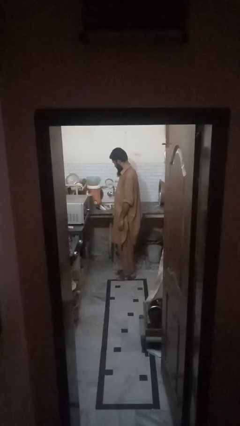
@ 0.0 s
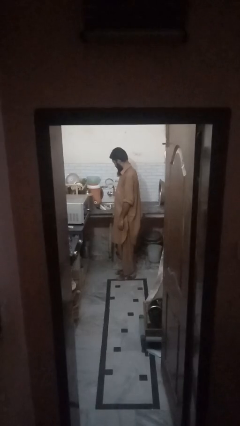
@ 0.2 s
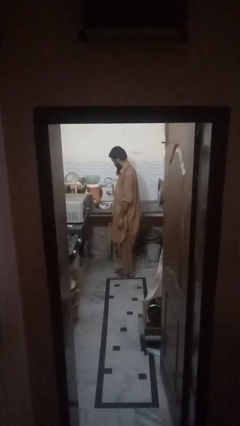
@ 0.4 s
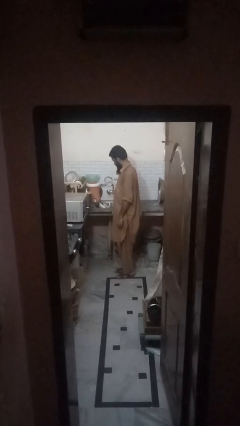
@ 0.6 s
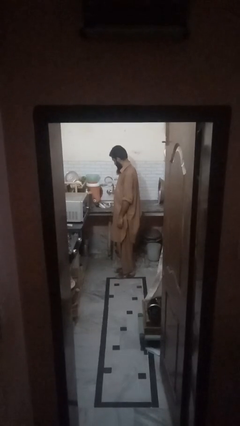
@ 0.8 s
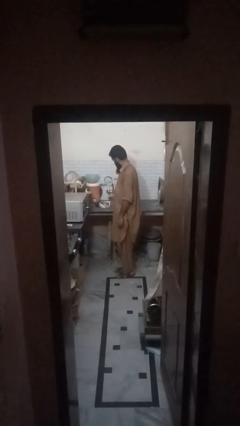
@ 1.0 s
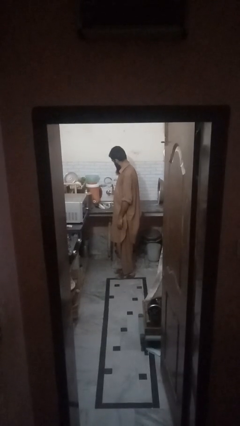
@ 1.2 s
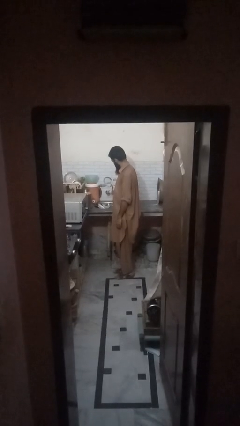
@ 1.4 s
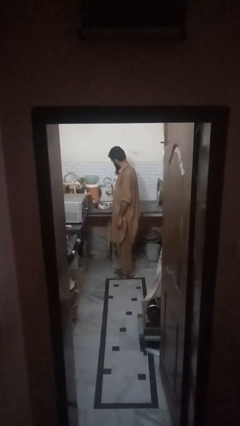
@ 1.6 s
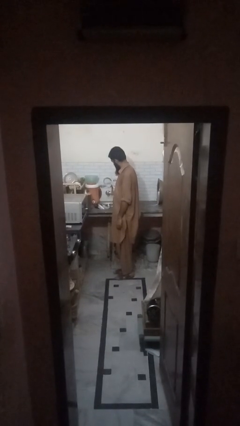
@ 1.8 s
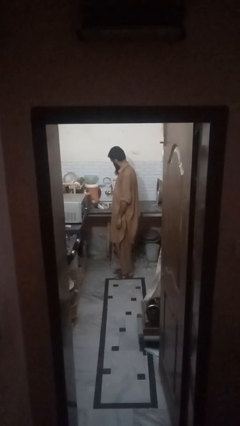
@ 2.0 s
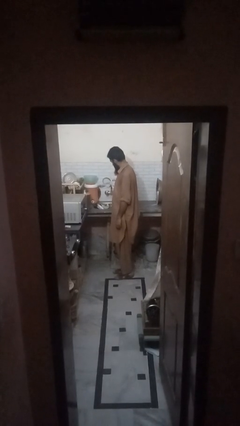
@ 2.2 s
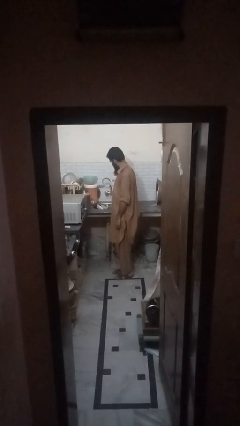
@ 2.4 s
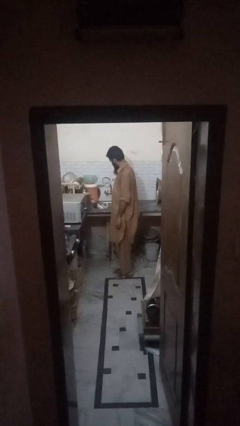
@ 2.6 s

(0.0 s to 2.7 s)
person closes dishwasher

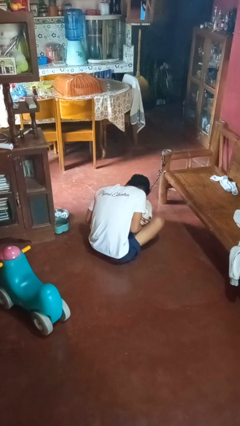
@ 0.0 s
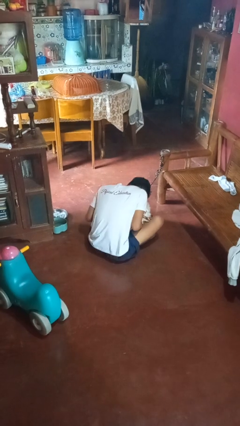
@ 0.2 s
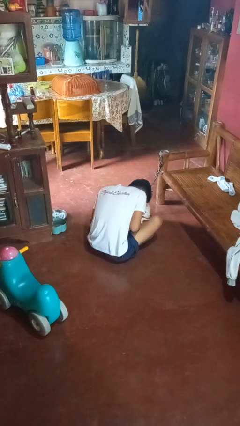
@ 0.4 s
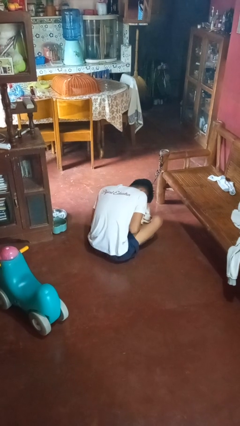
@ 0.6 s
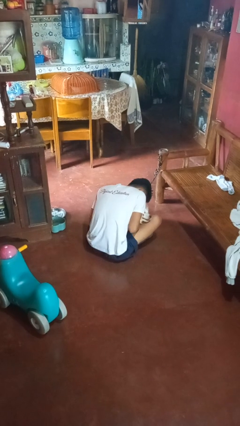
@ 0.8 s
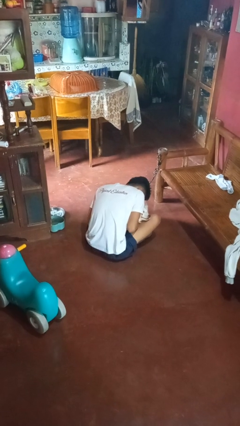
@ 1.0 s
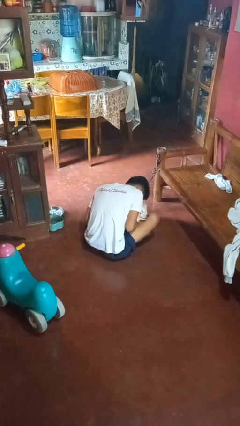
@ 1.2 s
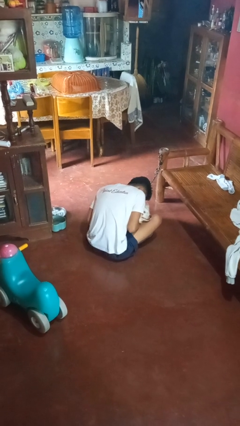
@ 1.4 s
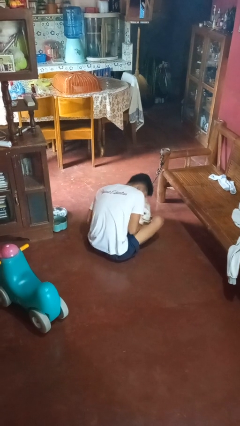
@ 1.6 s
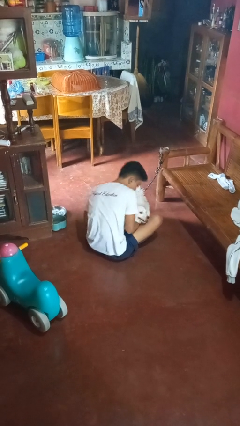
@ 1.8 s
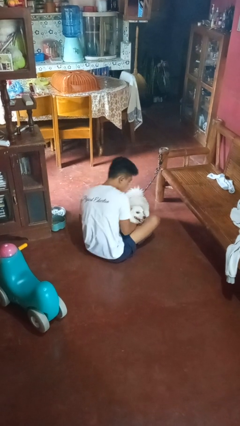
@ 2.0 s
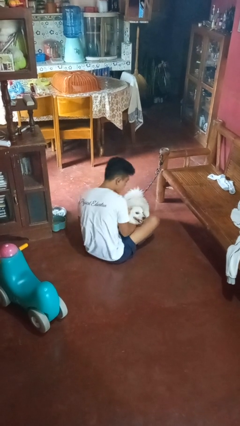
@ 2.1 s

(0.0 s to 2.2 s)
person hugs dog

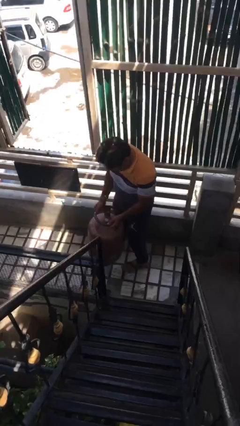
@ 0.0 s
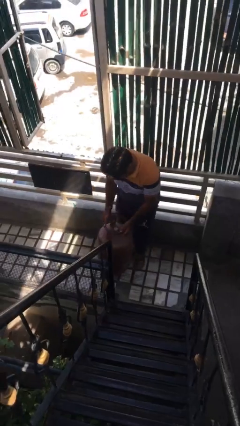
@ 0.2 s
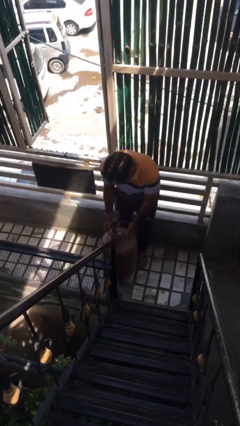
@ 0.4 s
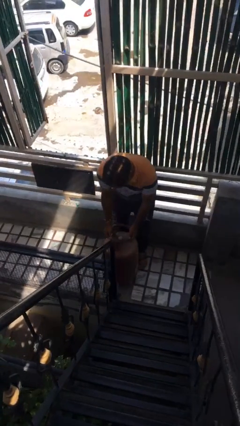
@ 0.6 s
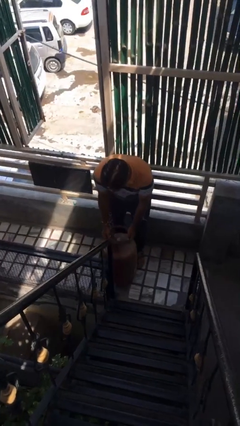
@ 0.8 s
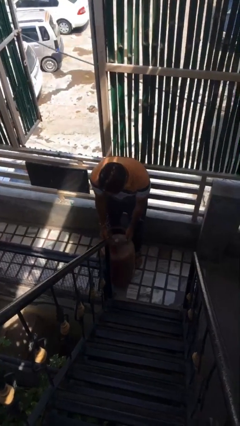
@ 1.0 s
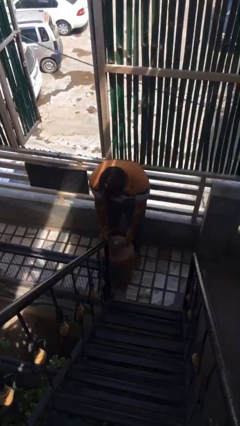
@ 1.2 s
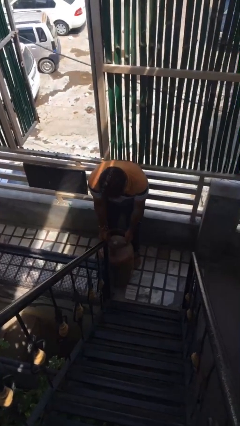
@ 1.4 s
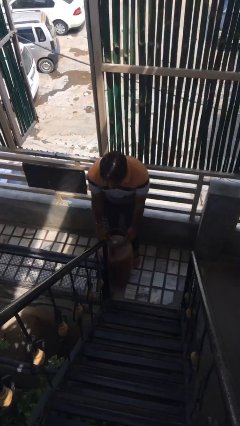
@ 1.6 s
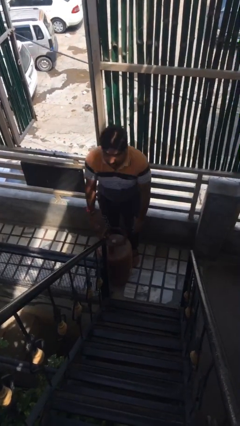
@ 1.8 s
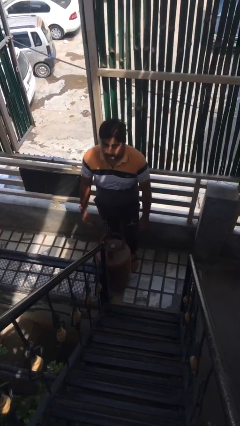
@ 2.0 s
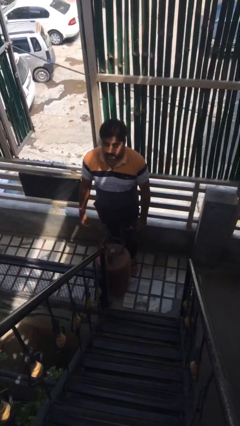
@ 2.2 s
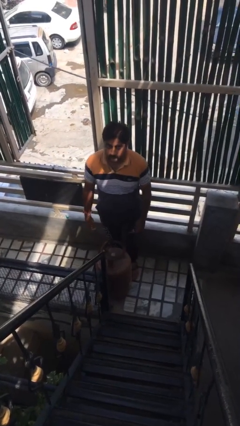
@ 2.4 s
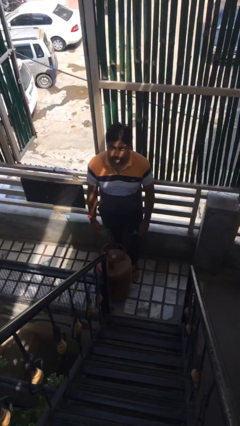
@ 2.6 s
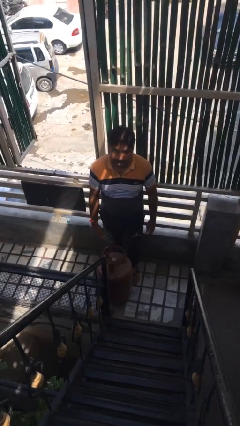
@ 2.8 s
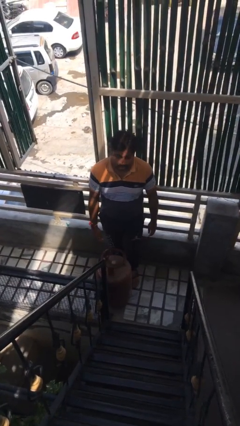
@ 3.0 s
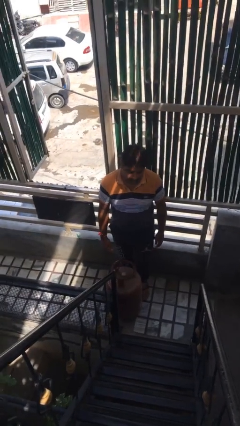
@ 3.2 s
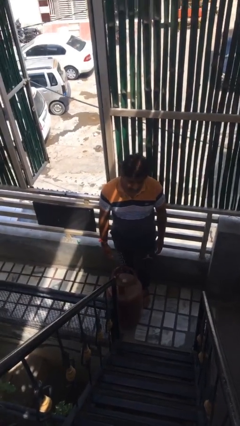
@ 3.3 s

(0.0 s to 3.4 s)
person puts down object on floor

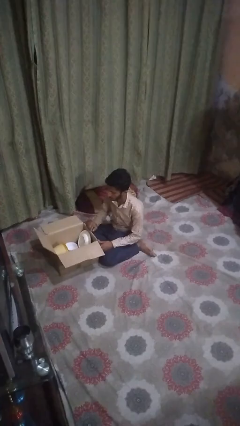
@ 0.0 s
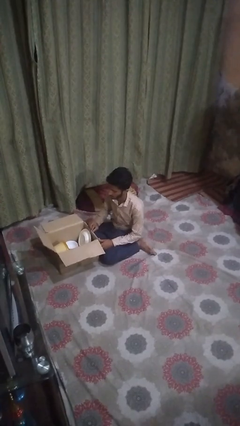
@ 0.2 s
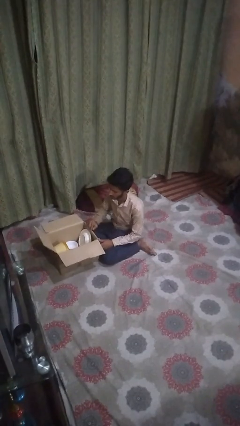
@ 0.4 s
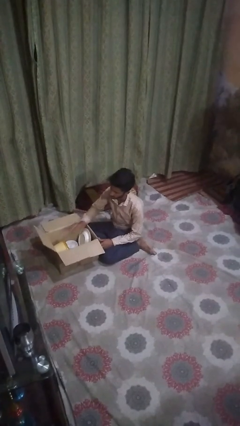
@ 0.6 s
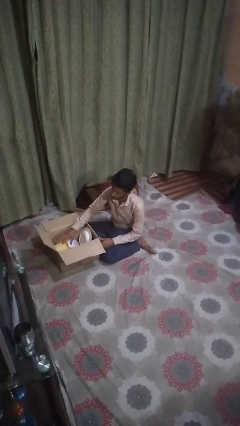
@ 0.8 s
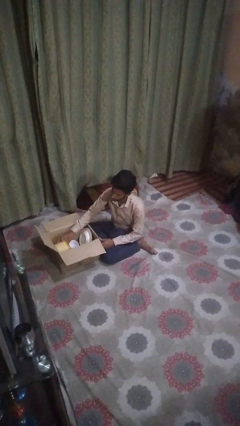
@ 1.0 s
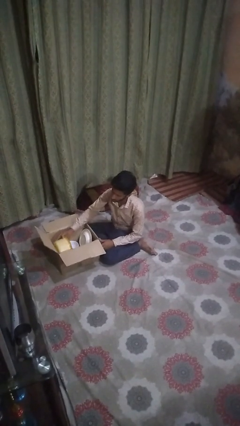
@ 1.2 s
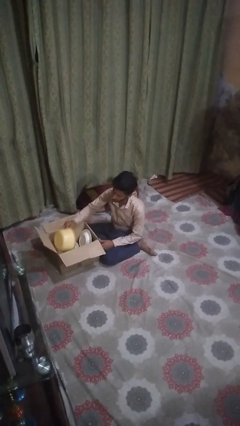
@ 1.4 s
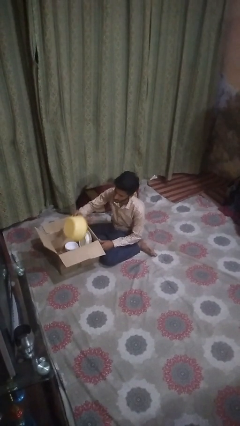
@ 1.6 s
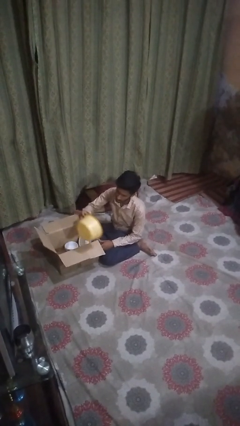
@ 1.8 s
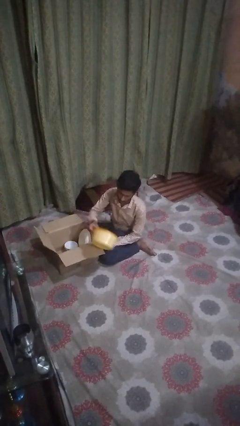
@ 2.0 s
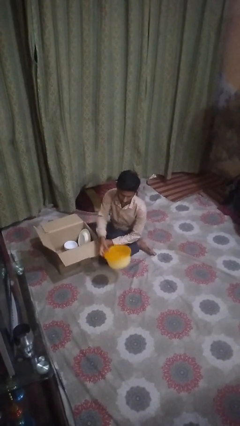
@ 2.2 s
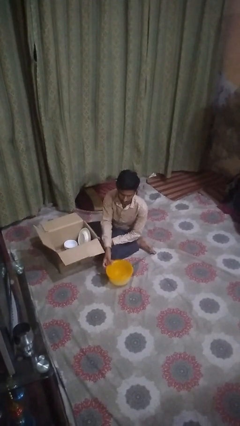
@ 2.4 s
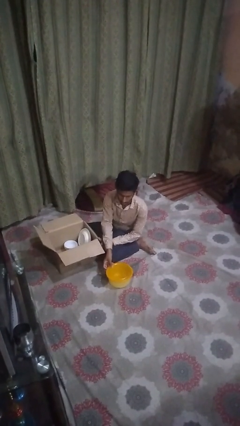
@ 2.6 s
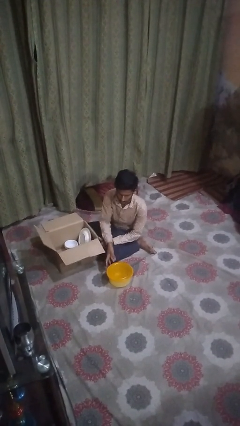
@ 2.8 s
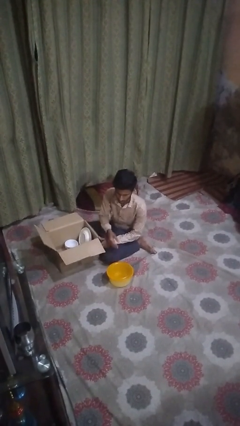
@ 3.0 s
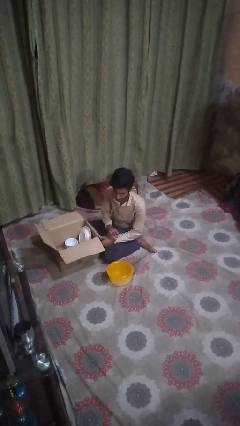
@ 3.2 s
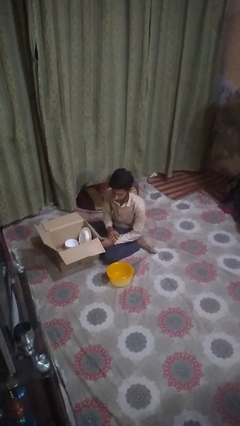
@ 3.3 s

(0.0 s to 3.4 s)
person takes object from box

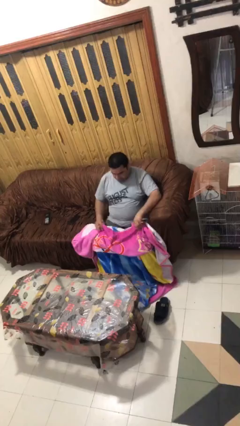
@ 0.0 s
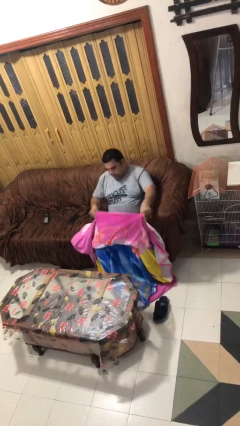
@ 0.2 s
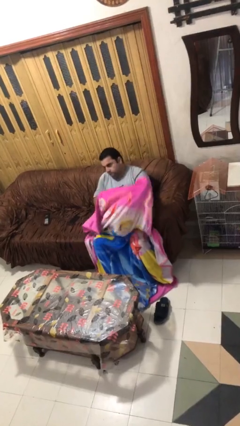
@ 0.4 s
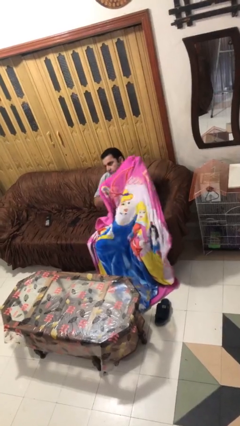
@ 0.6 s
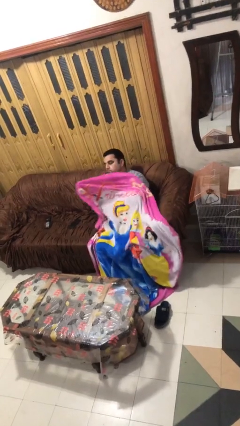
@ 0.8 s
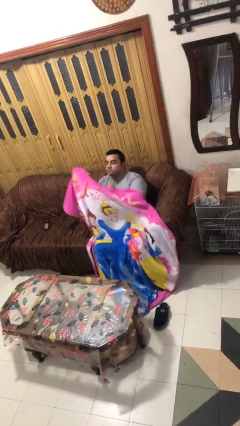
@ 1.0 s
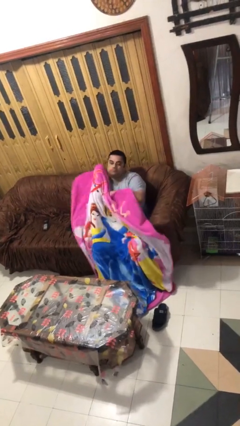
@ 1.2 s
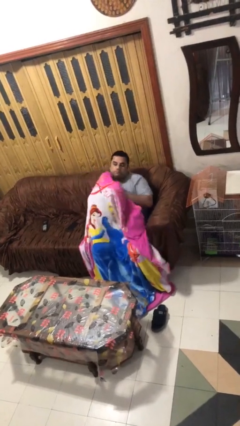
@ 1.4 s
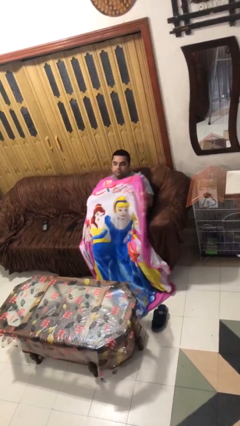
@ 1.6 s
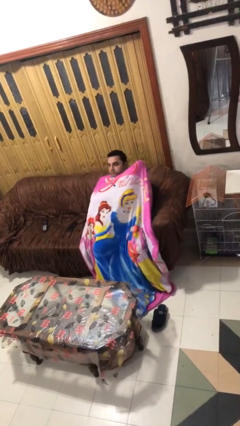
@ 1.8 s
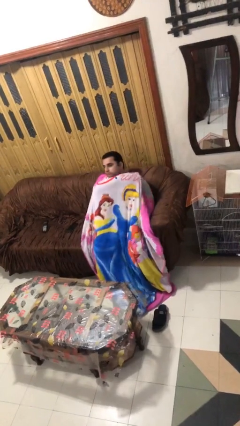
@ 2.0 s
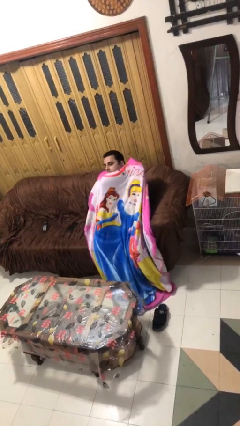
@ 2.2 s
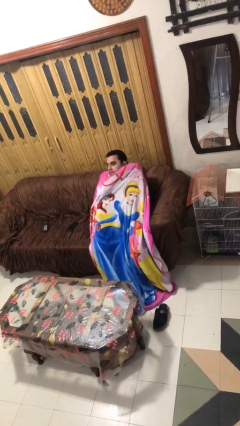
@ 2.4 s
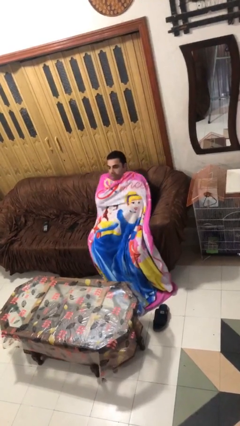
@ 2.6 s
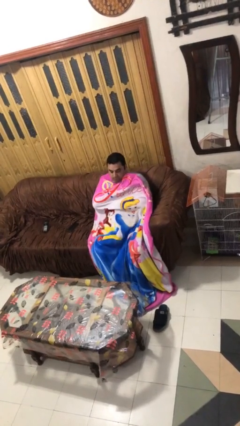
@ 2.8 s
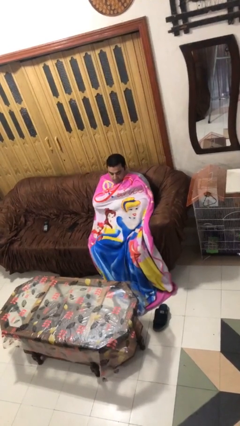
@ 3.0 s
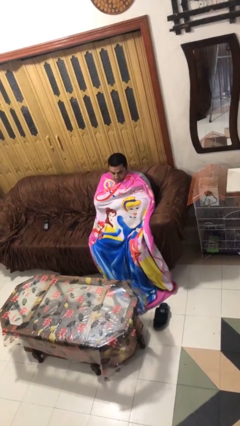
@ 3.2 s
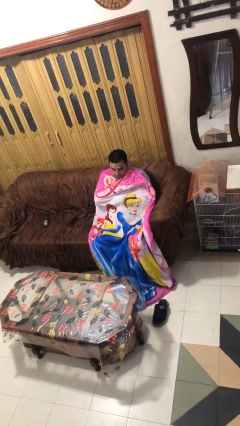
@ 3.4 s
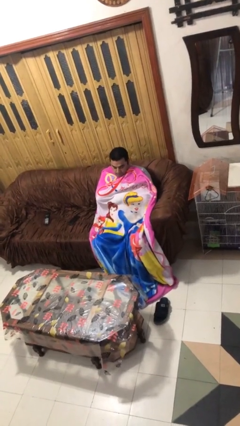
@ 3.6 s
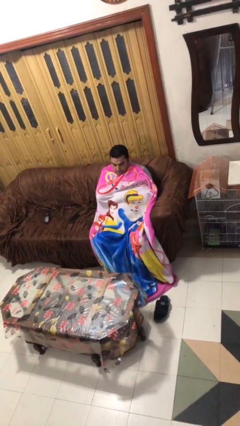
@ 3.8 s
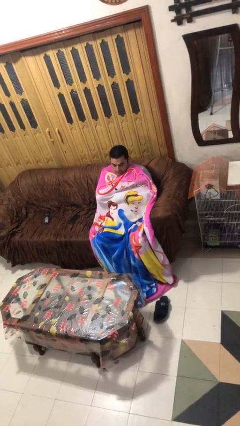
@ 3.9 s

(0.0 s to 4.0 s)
person covers with blanket

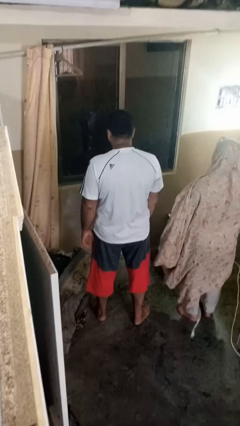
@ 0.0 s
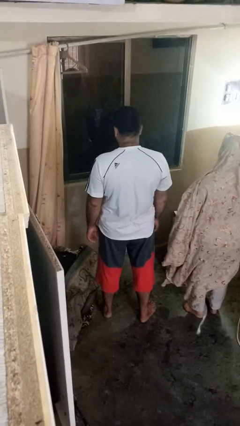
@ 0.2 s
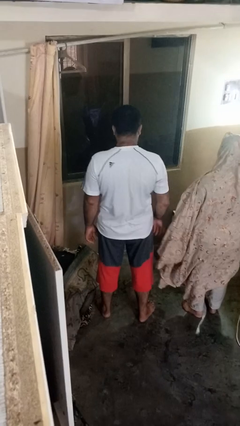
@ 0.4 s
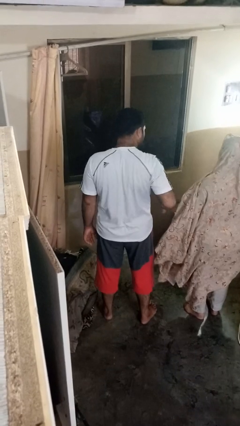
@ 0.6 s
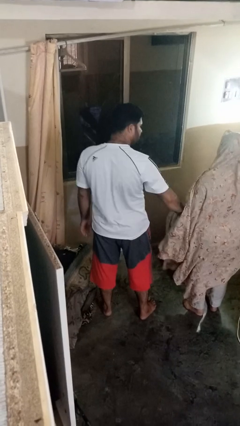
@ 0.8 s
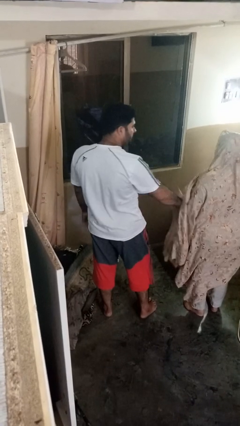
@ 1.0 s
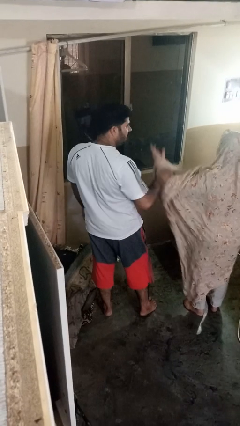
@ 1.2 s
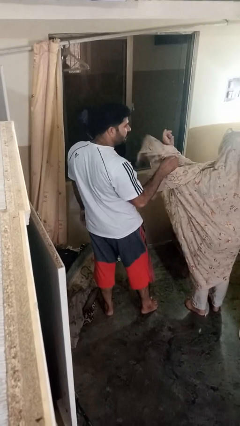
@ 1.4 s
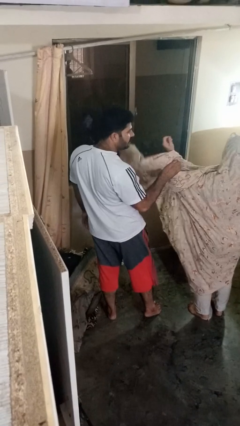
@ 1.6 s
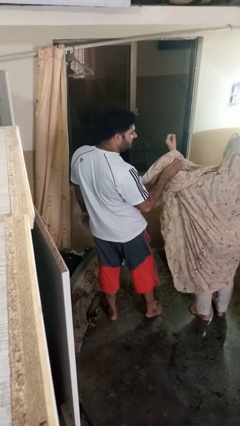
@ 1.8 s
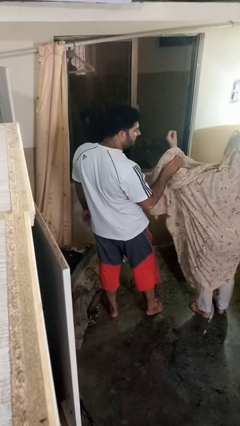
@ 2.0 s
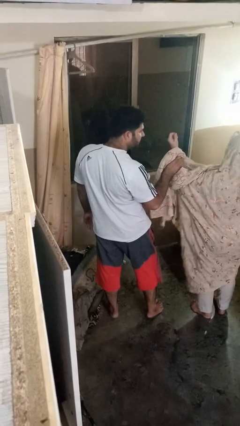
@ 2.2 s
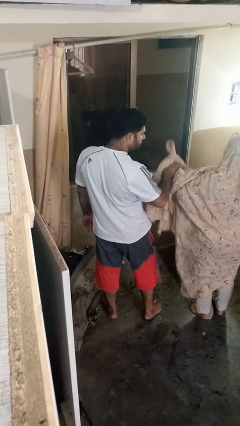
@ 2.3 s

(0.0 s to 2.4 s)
person grabs person by forearm
